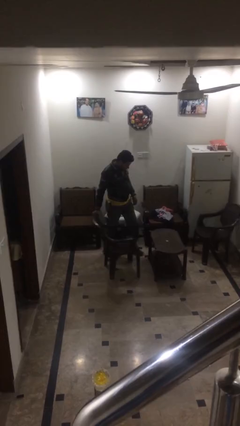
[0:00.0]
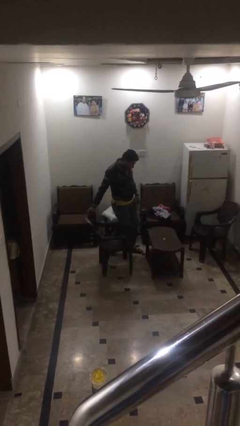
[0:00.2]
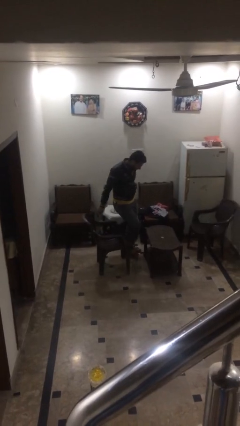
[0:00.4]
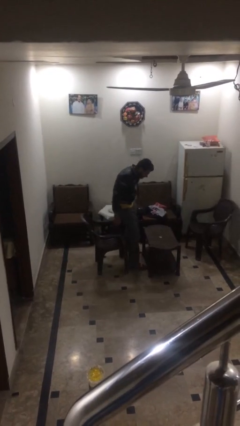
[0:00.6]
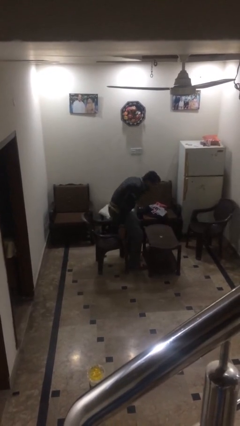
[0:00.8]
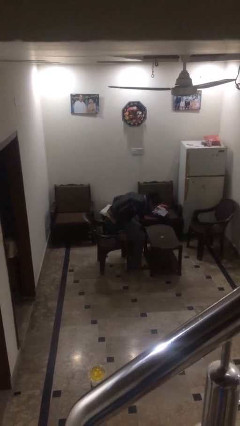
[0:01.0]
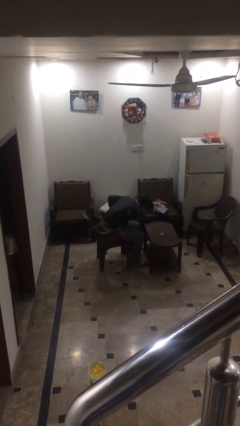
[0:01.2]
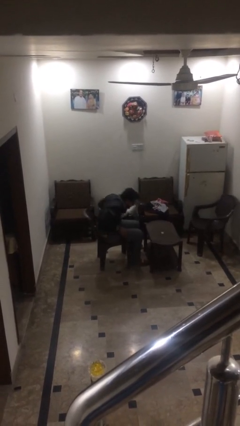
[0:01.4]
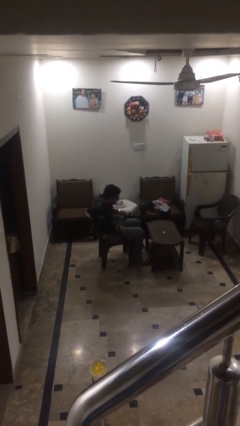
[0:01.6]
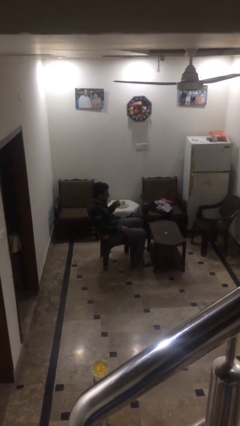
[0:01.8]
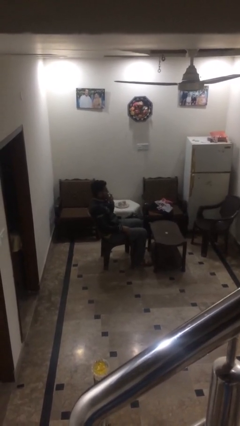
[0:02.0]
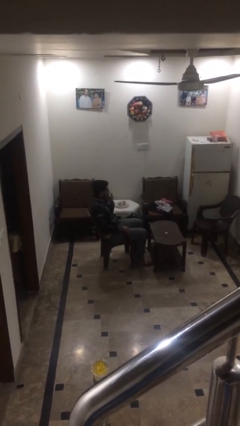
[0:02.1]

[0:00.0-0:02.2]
person sits down

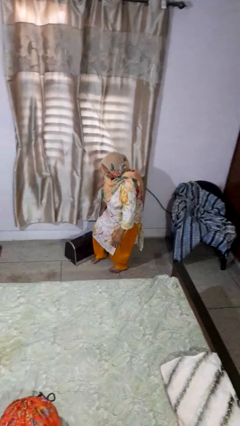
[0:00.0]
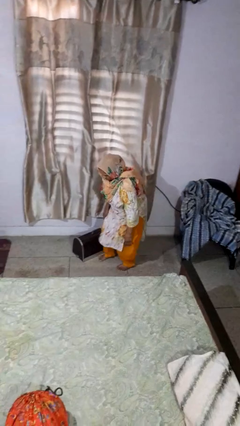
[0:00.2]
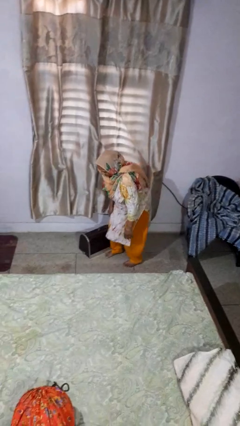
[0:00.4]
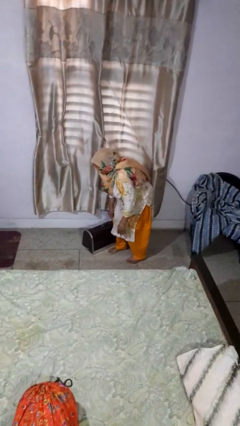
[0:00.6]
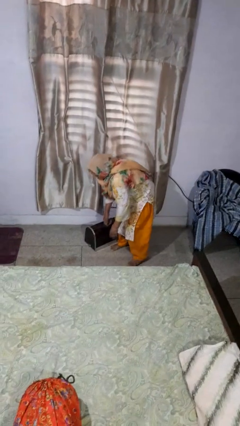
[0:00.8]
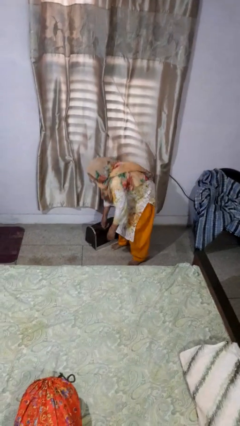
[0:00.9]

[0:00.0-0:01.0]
person trips on object on floor

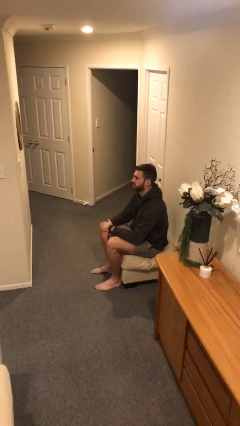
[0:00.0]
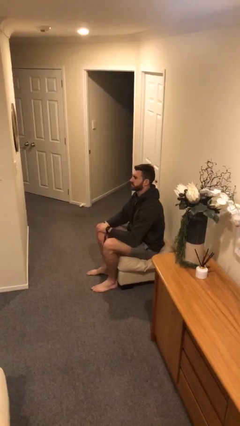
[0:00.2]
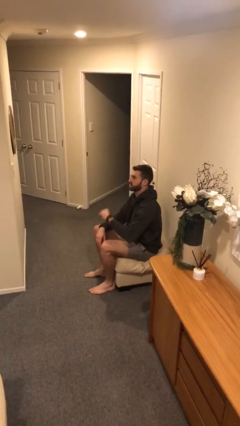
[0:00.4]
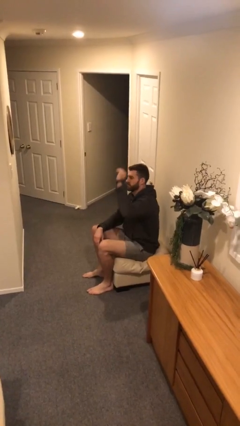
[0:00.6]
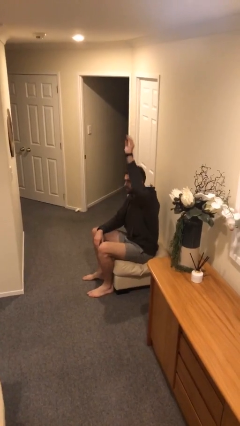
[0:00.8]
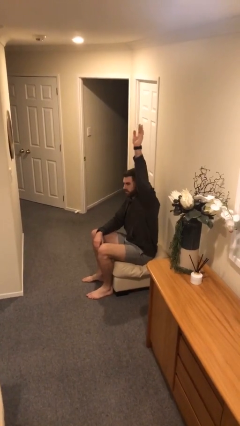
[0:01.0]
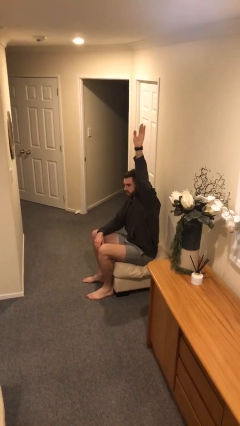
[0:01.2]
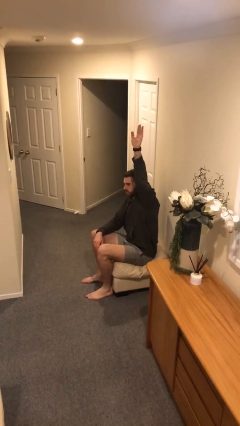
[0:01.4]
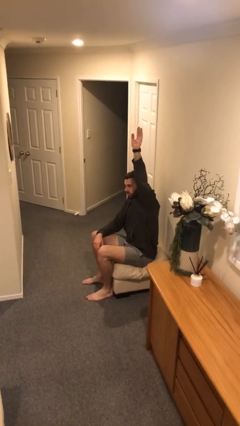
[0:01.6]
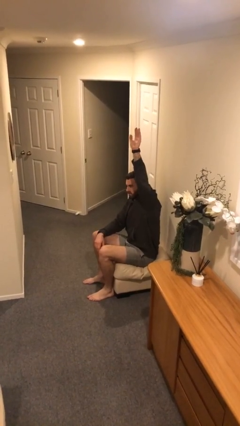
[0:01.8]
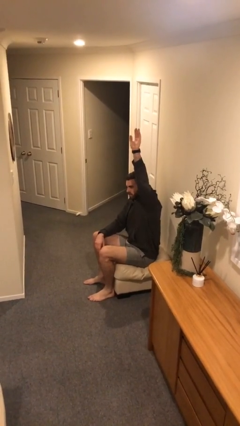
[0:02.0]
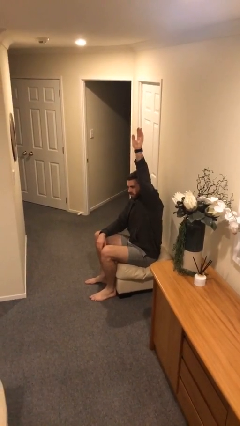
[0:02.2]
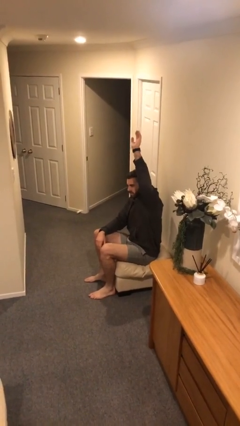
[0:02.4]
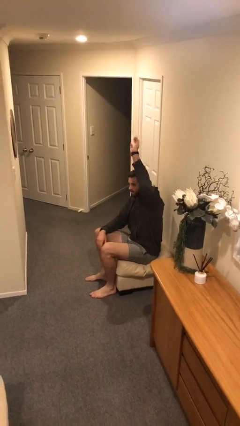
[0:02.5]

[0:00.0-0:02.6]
person gestures raise hand

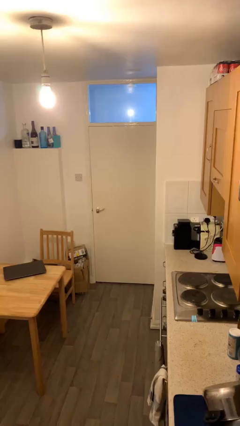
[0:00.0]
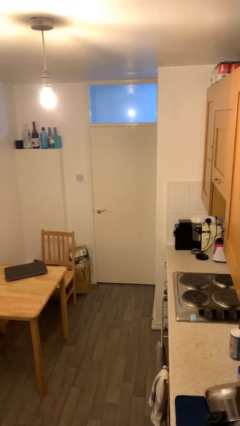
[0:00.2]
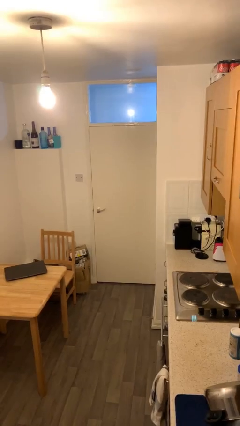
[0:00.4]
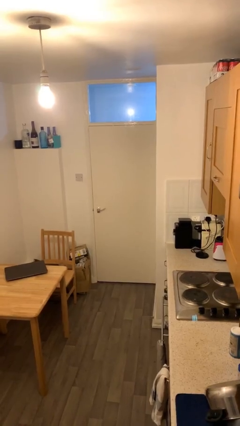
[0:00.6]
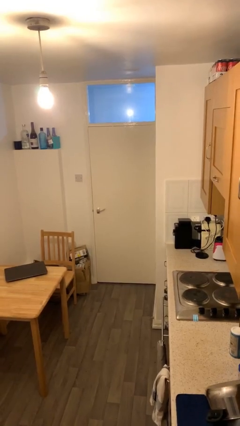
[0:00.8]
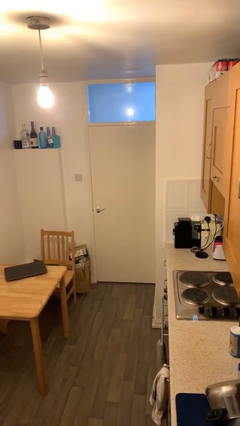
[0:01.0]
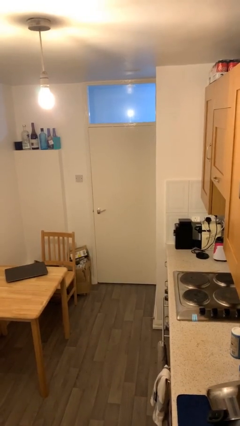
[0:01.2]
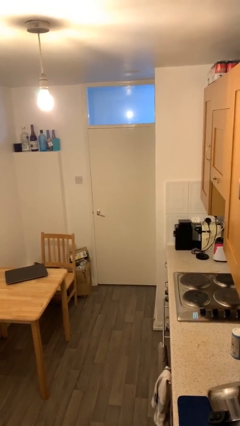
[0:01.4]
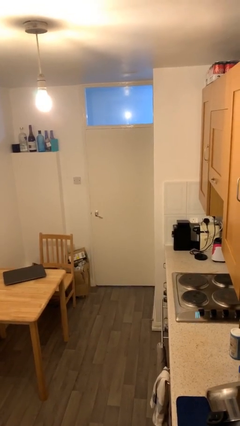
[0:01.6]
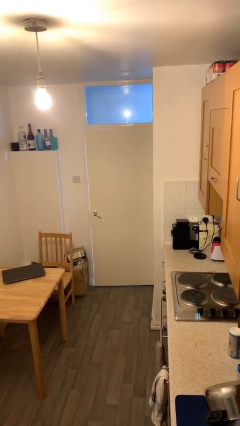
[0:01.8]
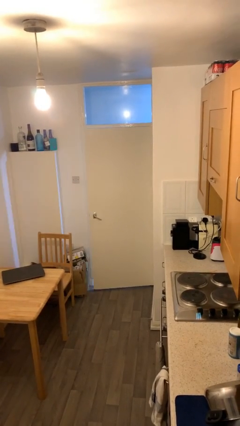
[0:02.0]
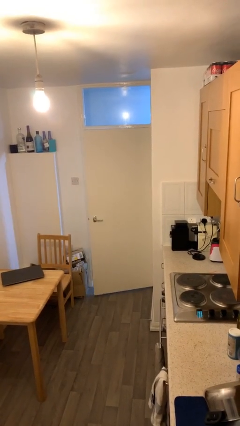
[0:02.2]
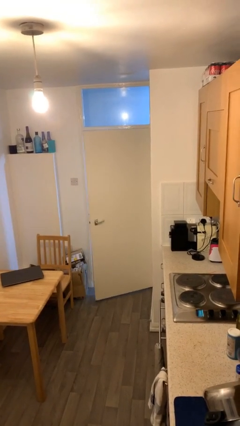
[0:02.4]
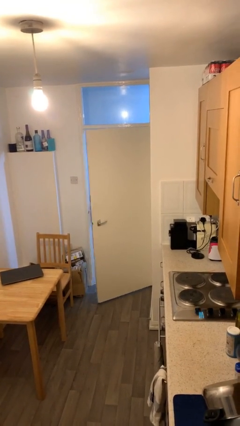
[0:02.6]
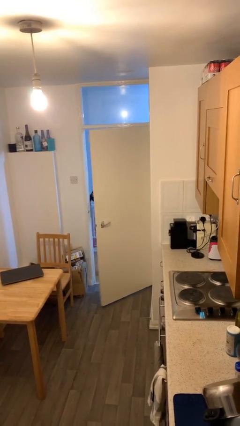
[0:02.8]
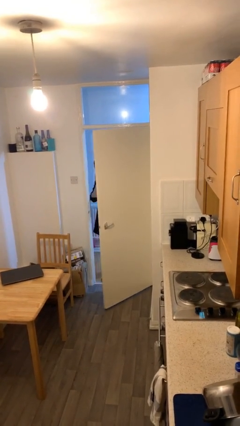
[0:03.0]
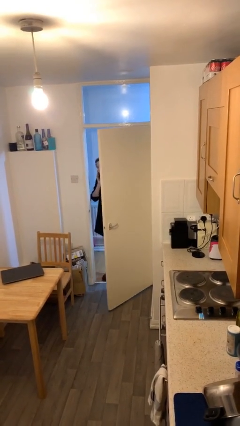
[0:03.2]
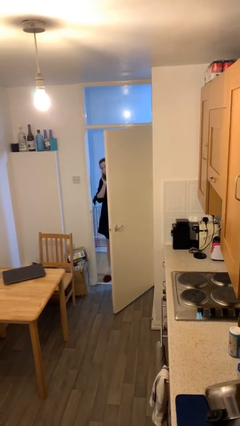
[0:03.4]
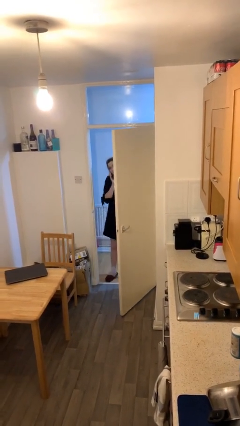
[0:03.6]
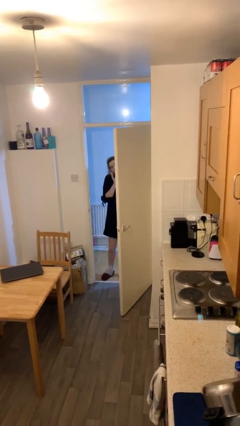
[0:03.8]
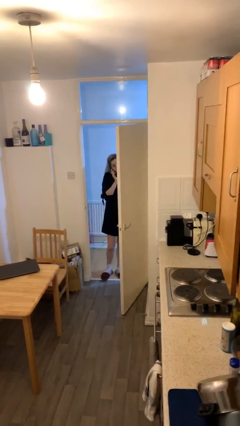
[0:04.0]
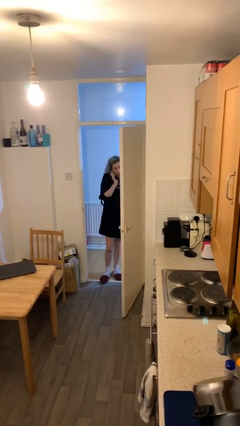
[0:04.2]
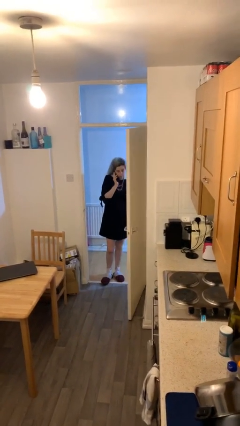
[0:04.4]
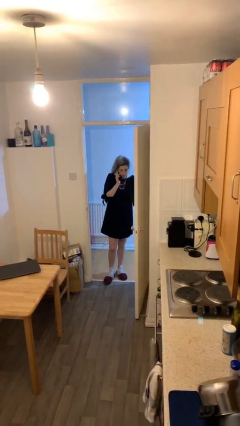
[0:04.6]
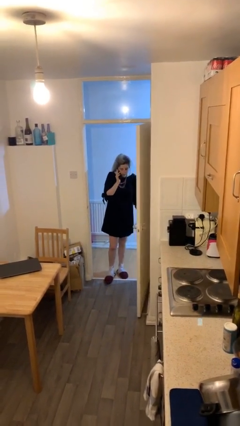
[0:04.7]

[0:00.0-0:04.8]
person opens facility door

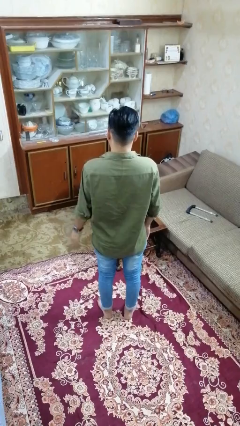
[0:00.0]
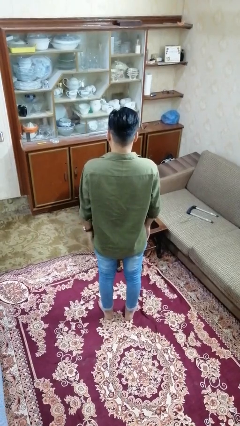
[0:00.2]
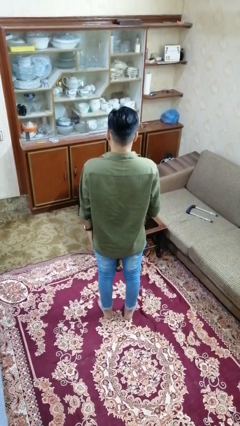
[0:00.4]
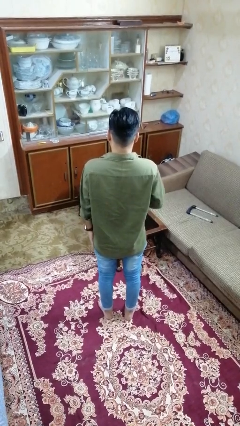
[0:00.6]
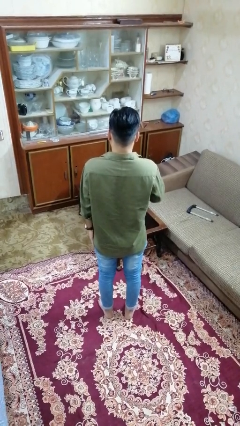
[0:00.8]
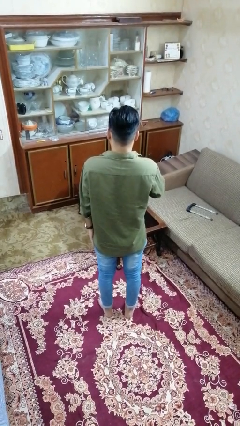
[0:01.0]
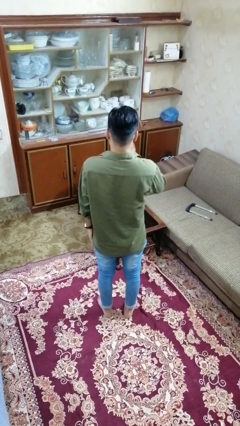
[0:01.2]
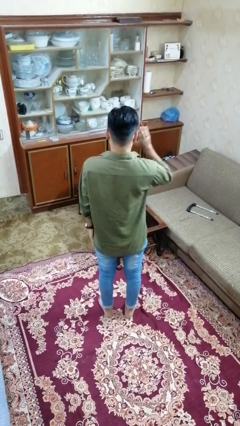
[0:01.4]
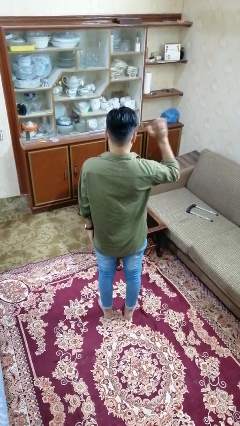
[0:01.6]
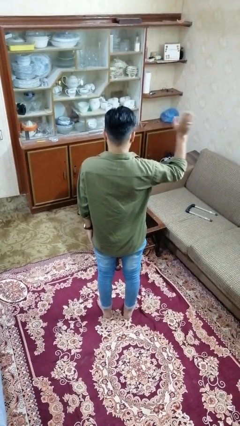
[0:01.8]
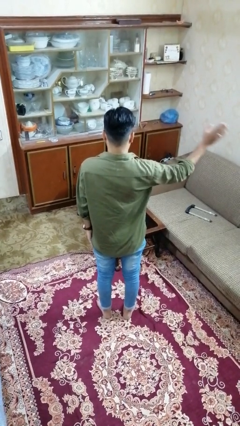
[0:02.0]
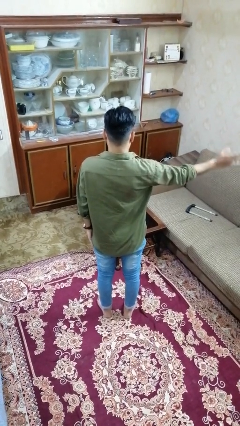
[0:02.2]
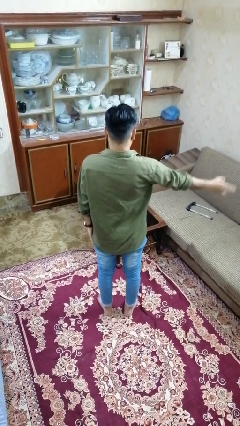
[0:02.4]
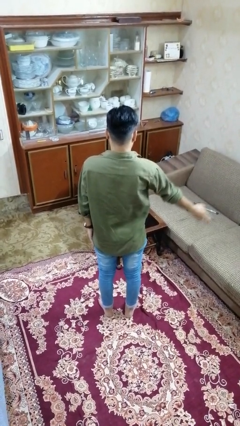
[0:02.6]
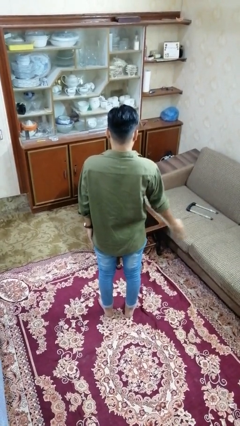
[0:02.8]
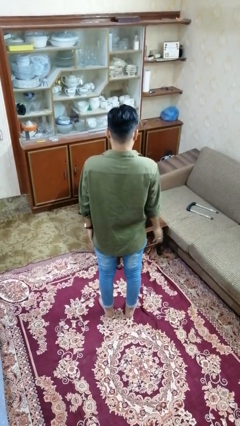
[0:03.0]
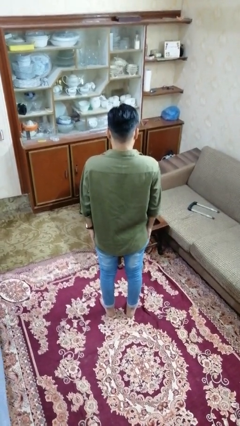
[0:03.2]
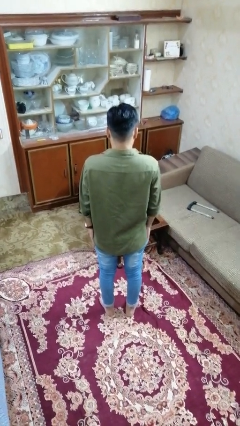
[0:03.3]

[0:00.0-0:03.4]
person gestures swipe right

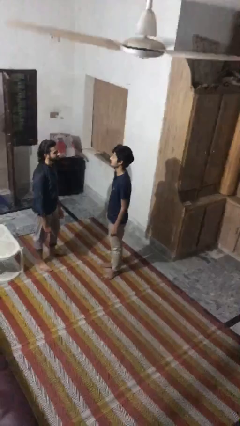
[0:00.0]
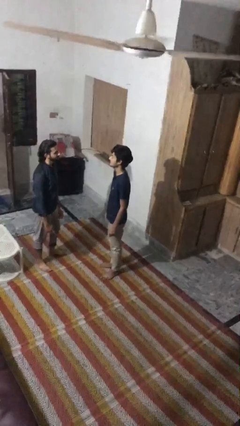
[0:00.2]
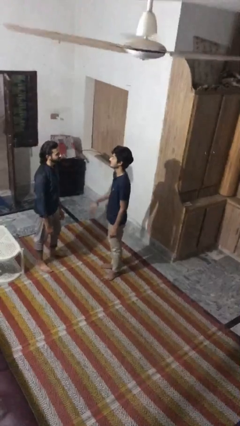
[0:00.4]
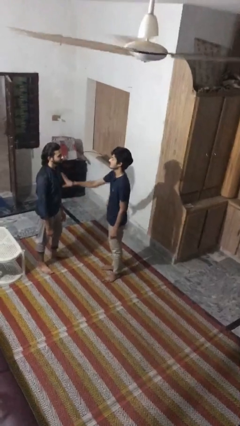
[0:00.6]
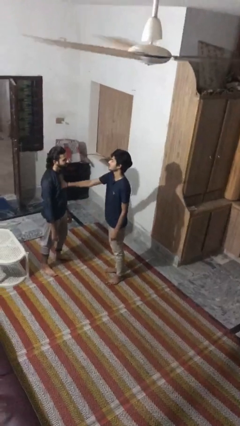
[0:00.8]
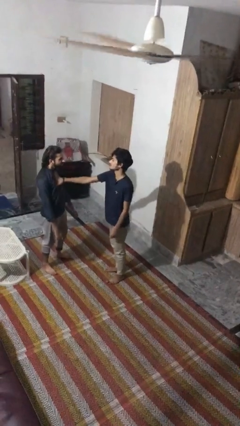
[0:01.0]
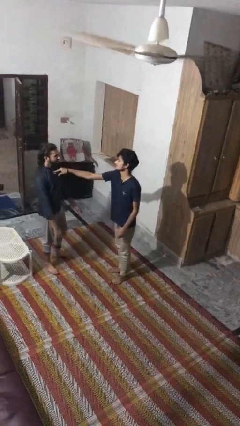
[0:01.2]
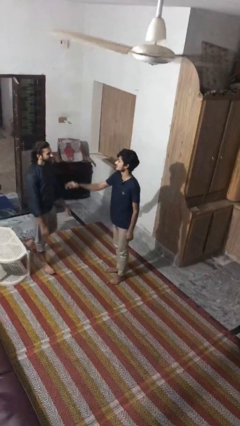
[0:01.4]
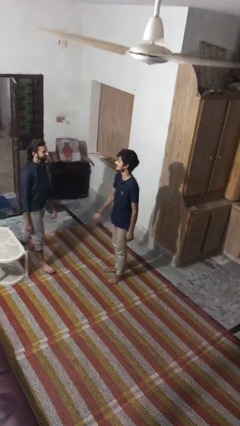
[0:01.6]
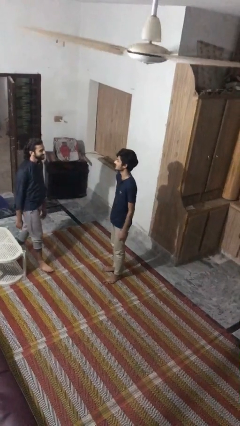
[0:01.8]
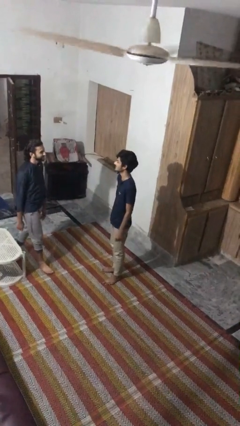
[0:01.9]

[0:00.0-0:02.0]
person shoves person

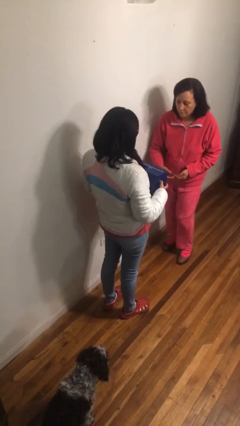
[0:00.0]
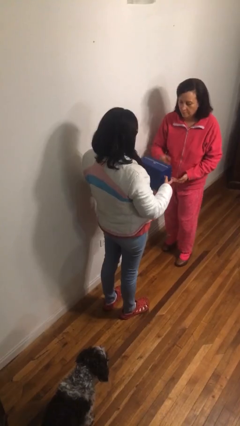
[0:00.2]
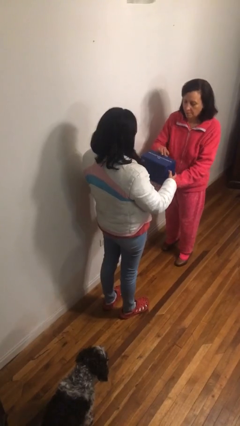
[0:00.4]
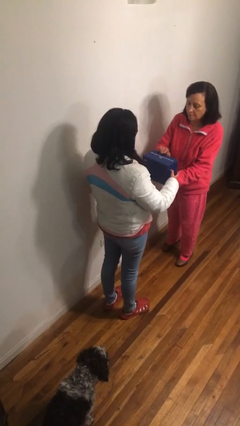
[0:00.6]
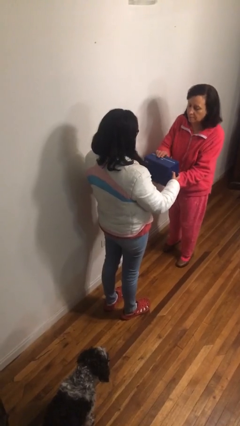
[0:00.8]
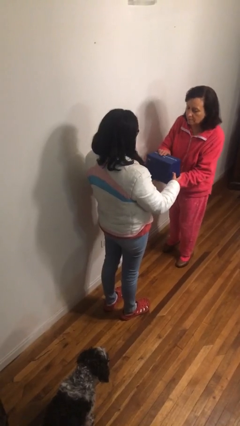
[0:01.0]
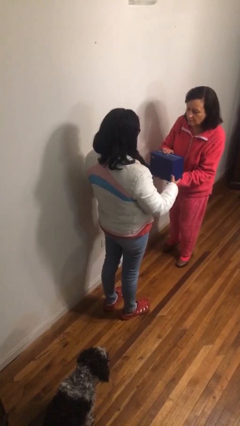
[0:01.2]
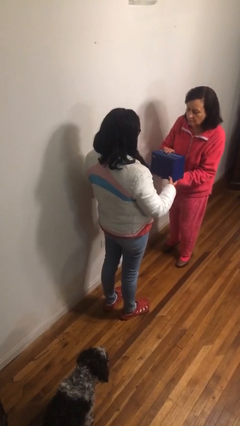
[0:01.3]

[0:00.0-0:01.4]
person transfers object to person
